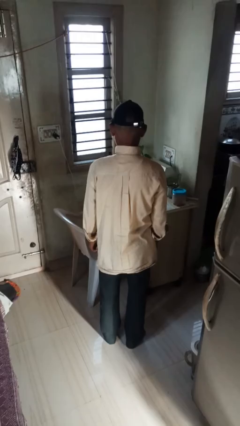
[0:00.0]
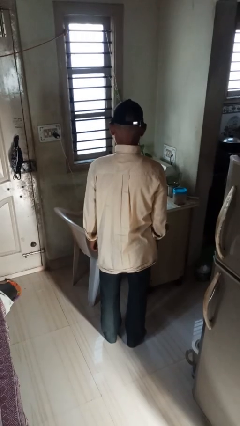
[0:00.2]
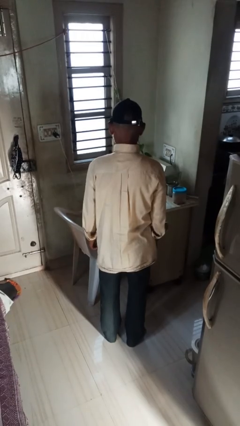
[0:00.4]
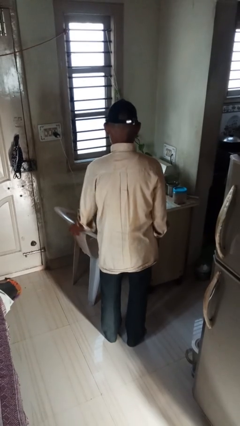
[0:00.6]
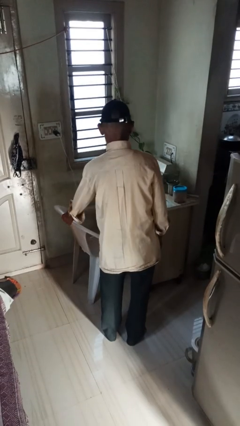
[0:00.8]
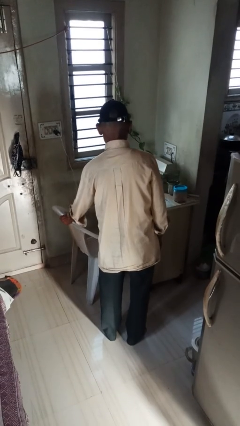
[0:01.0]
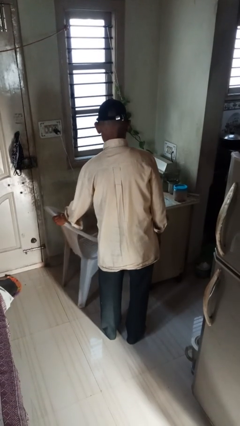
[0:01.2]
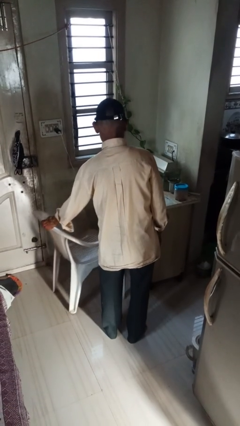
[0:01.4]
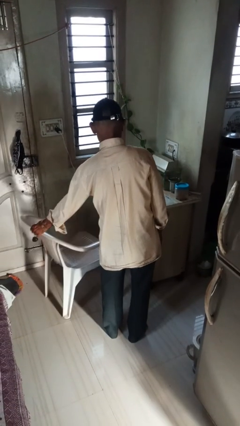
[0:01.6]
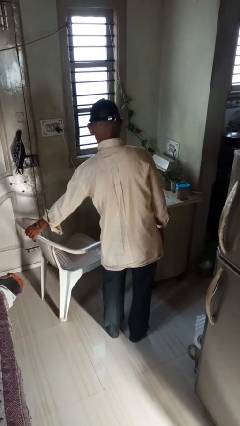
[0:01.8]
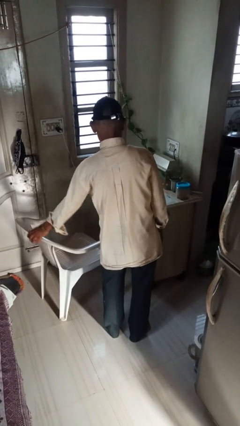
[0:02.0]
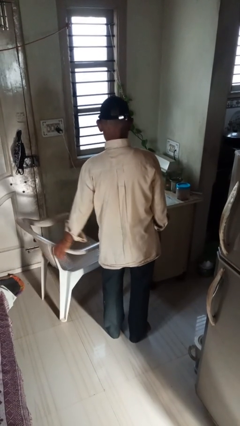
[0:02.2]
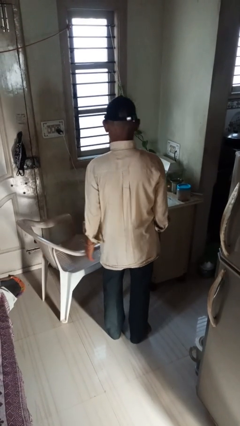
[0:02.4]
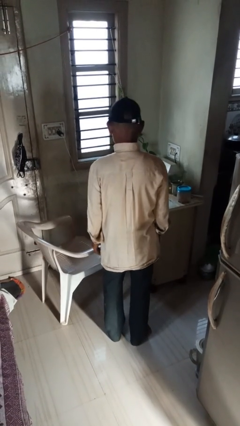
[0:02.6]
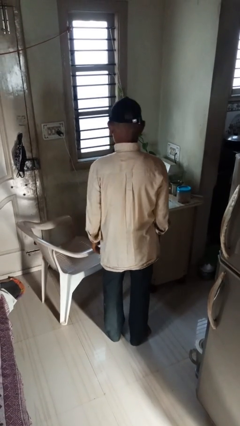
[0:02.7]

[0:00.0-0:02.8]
person pulls out chair

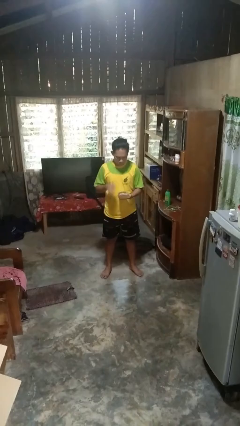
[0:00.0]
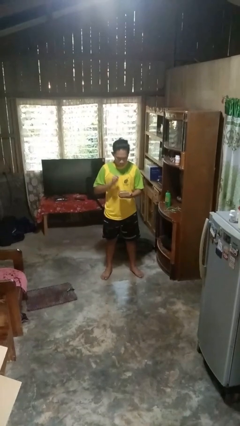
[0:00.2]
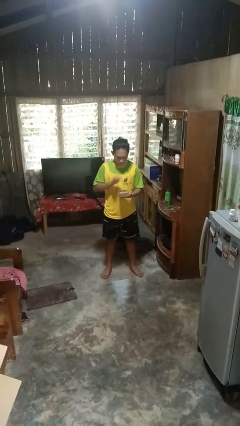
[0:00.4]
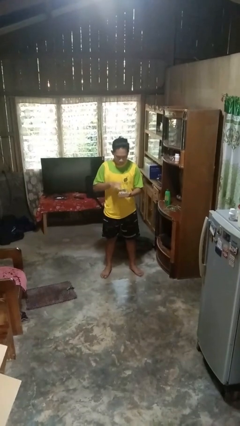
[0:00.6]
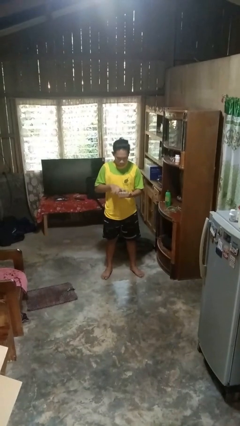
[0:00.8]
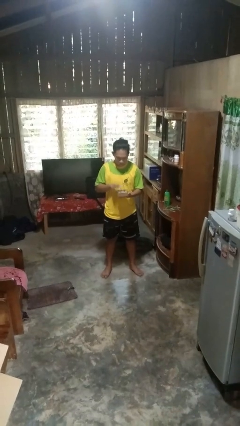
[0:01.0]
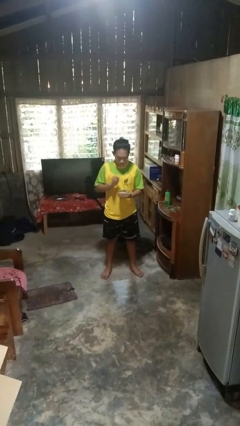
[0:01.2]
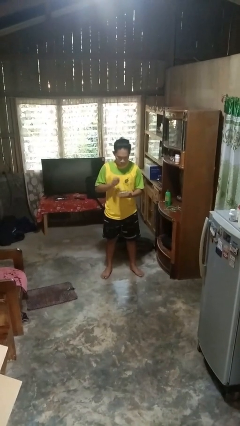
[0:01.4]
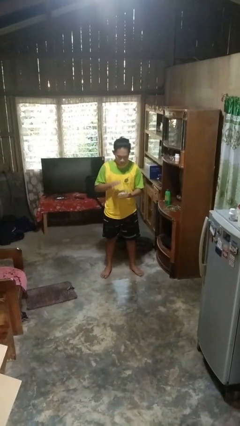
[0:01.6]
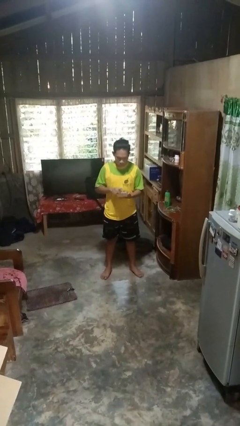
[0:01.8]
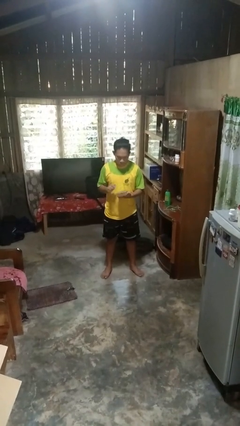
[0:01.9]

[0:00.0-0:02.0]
person taps object with finger

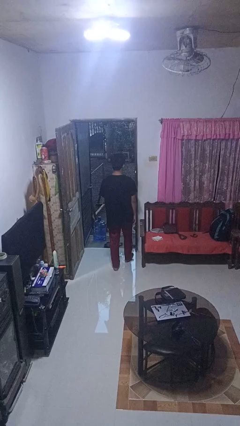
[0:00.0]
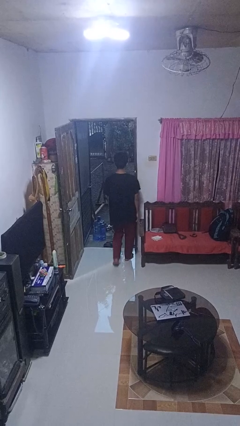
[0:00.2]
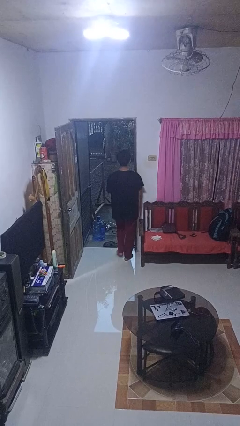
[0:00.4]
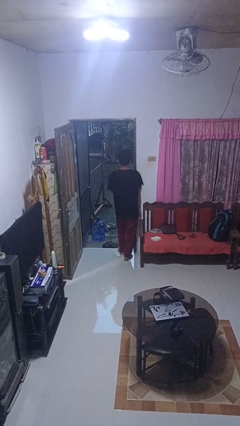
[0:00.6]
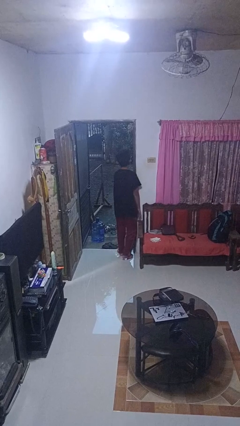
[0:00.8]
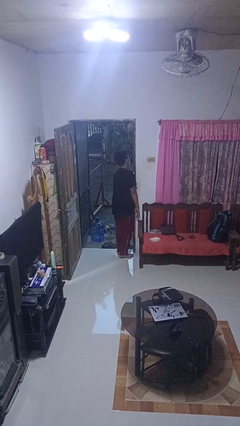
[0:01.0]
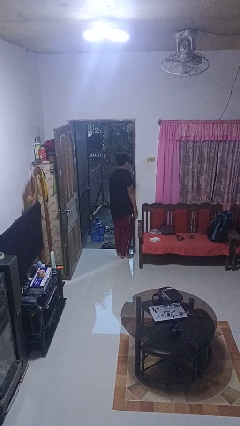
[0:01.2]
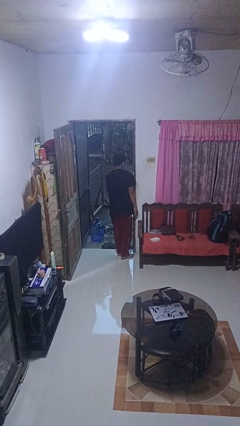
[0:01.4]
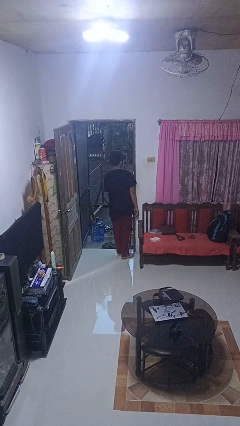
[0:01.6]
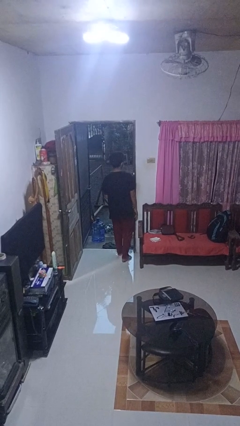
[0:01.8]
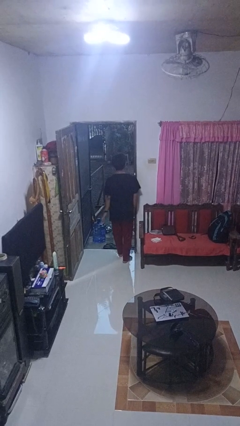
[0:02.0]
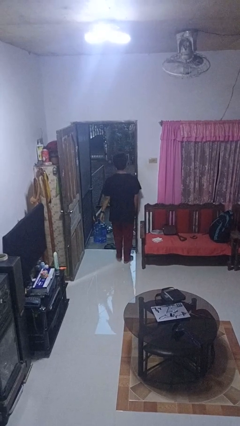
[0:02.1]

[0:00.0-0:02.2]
person bumps into wall

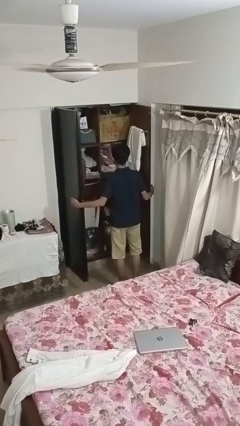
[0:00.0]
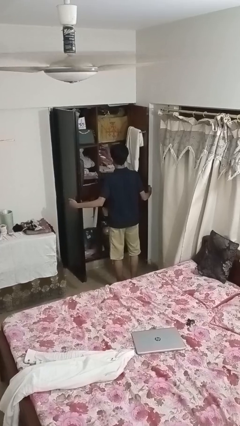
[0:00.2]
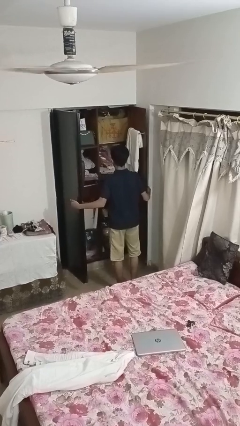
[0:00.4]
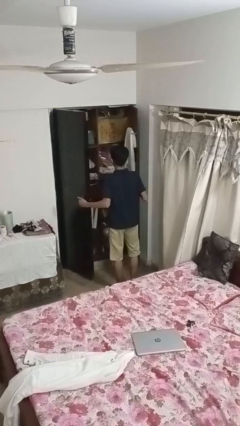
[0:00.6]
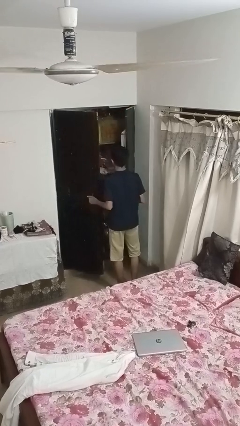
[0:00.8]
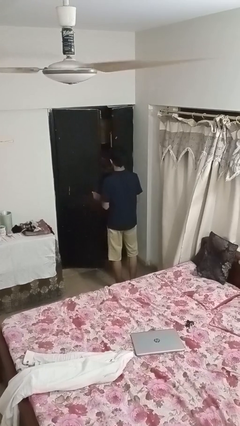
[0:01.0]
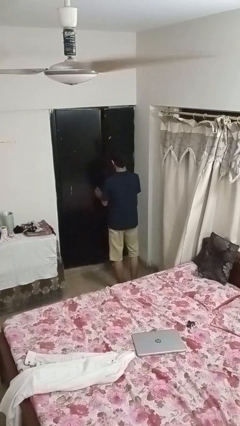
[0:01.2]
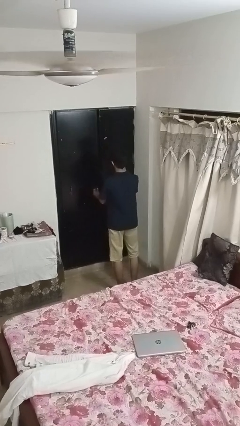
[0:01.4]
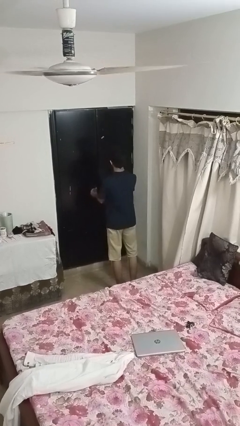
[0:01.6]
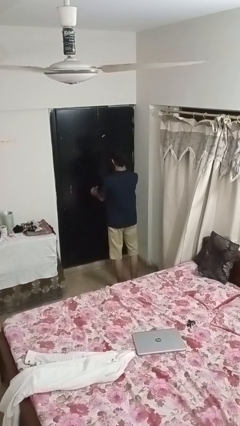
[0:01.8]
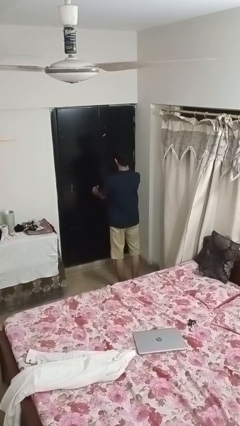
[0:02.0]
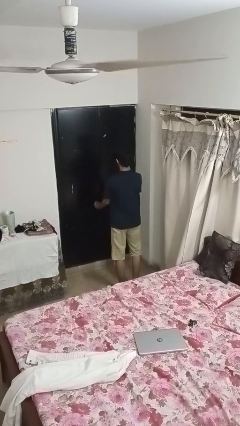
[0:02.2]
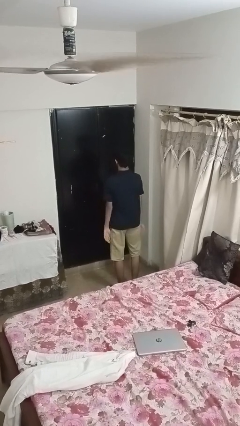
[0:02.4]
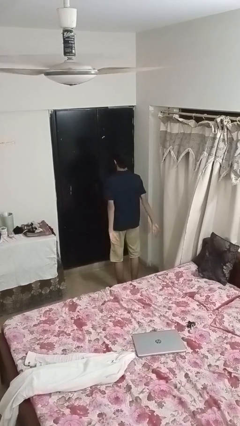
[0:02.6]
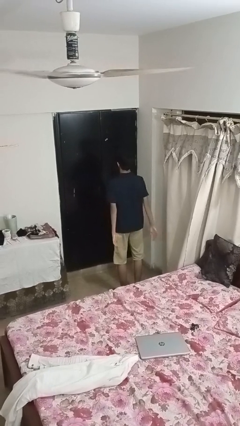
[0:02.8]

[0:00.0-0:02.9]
person closes closet door

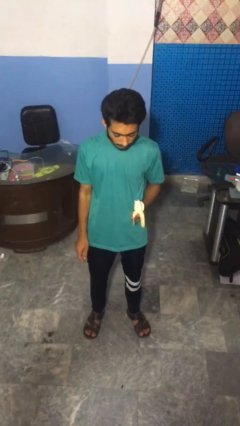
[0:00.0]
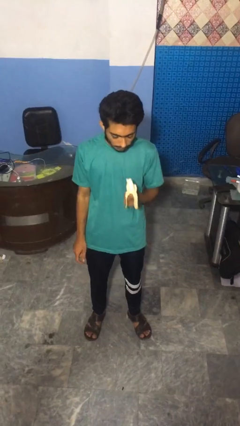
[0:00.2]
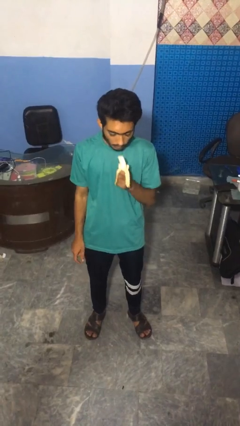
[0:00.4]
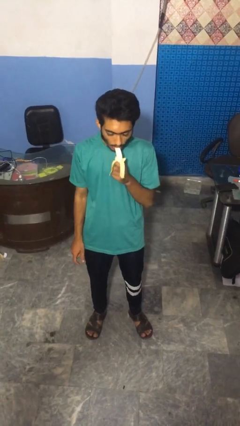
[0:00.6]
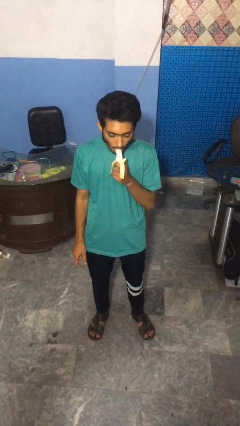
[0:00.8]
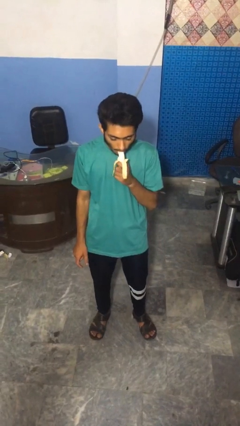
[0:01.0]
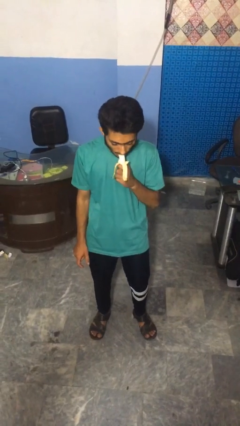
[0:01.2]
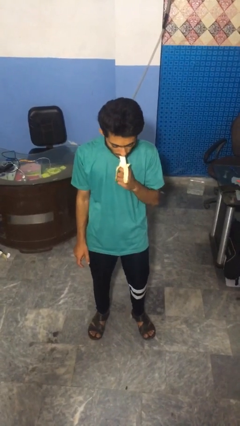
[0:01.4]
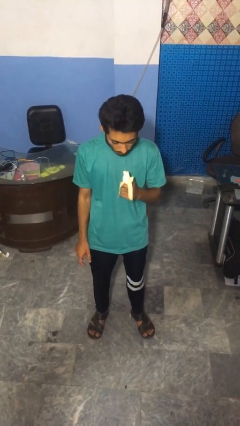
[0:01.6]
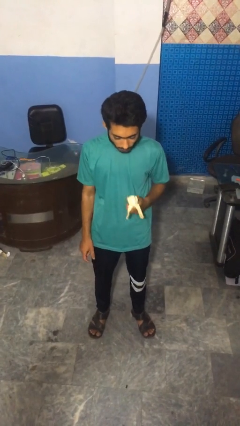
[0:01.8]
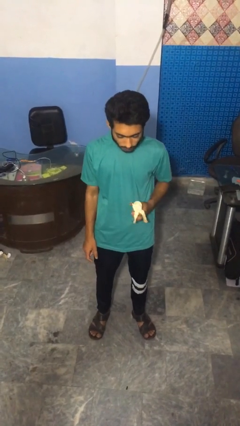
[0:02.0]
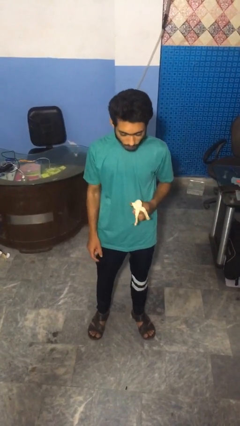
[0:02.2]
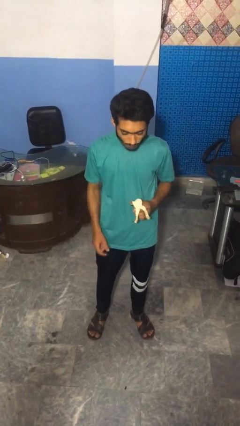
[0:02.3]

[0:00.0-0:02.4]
person eats banana

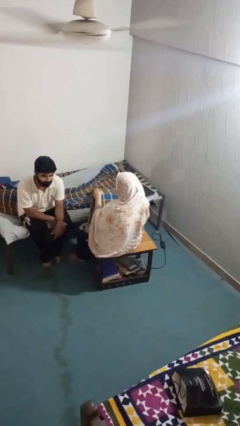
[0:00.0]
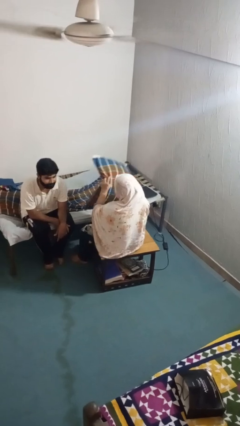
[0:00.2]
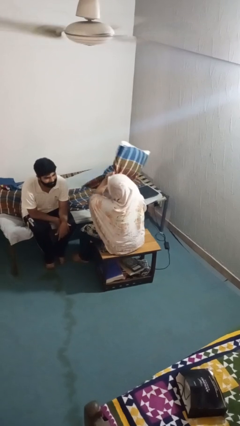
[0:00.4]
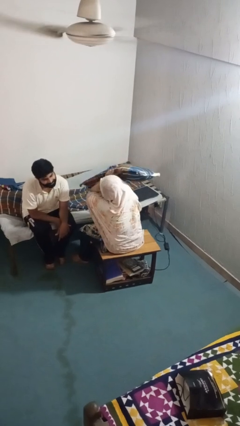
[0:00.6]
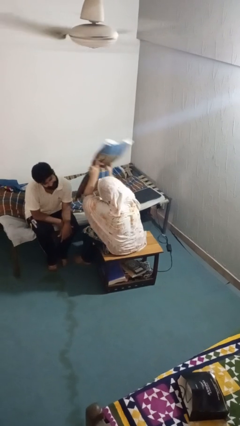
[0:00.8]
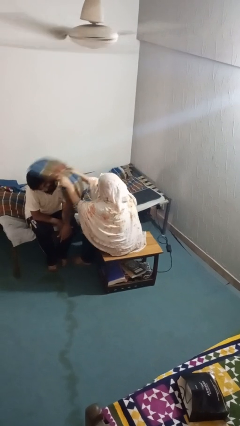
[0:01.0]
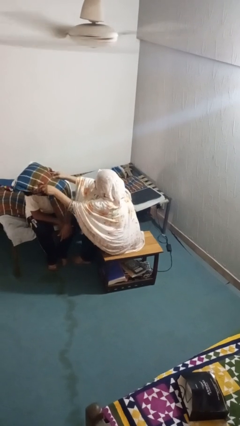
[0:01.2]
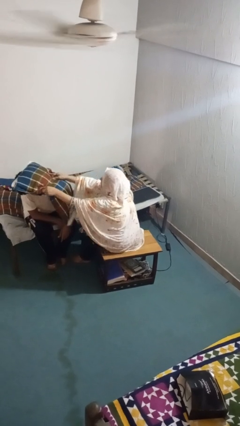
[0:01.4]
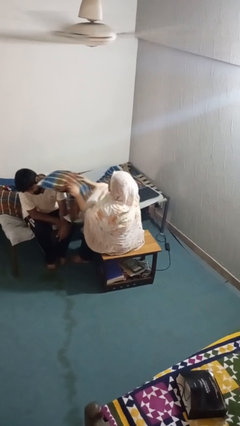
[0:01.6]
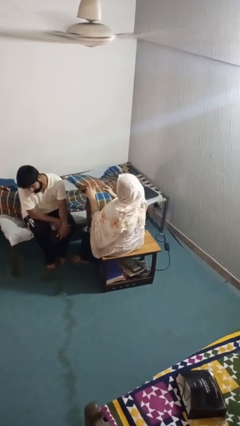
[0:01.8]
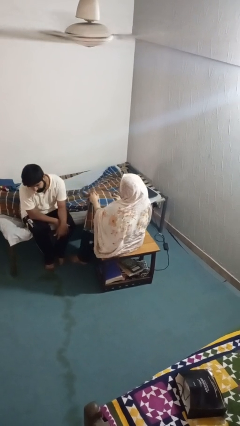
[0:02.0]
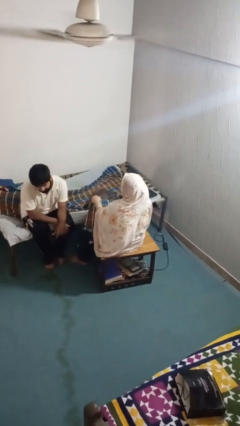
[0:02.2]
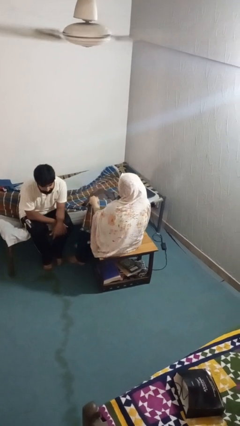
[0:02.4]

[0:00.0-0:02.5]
person hits person with pillow

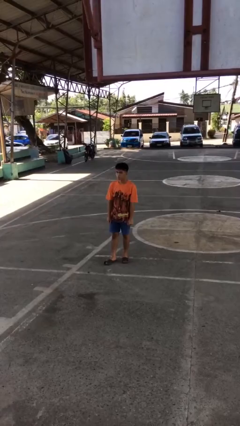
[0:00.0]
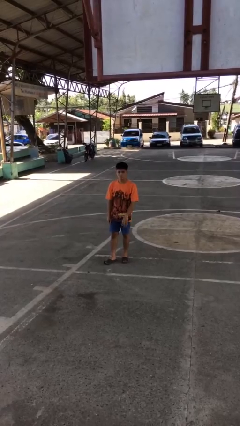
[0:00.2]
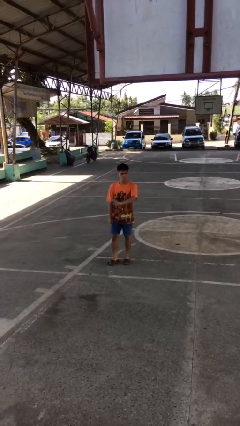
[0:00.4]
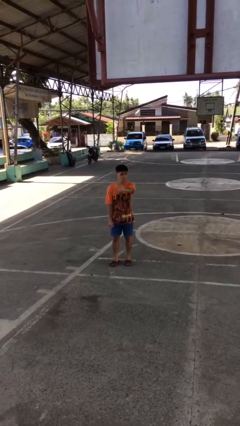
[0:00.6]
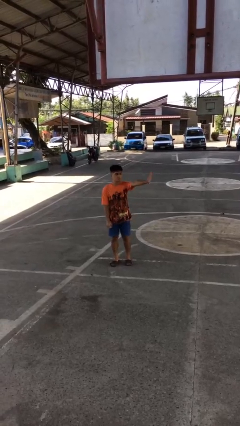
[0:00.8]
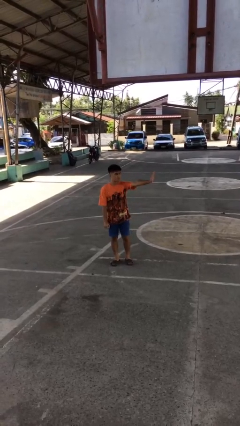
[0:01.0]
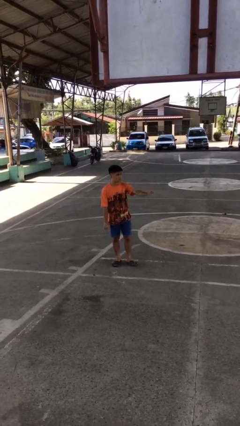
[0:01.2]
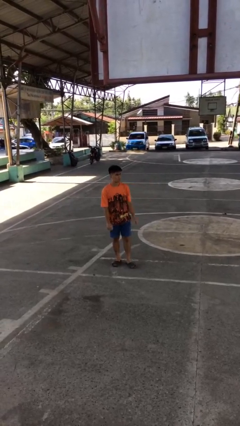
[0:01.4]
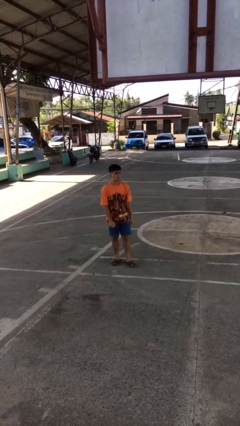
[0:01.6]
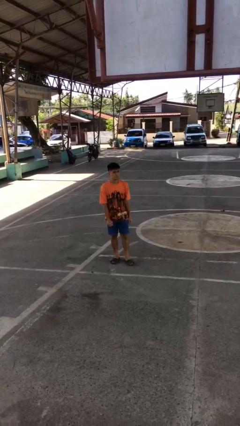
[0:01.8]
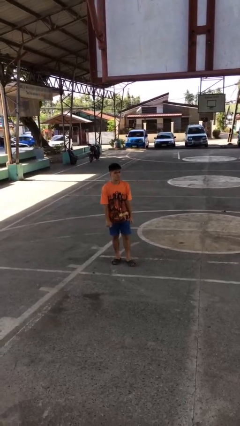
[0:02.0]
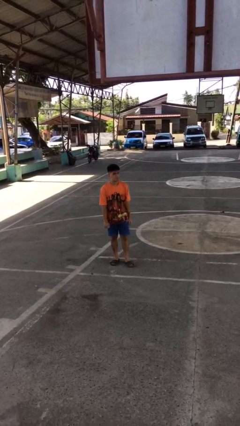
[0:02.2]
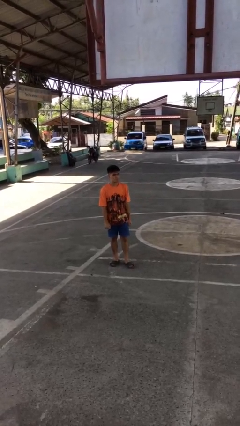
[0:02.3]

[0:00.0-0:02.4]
person gestures swipe left
